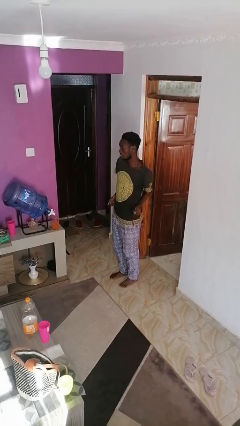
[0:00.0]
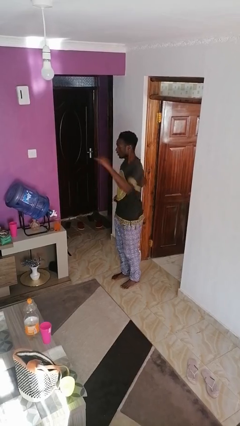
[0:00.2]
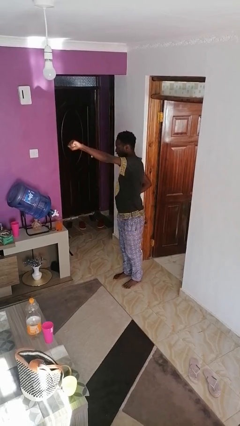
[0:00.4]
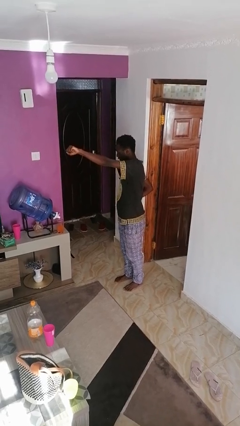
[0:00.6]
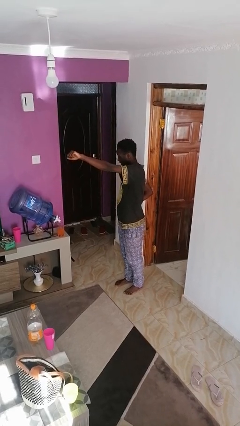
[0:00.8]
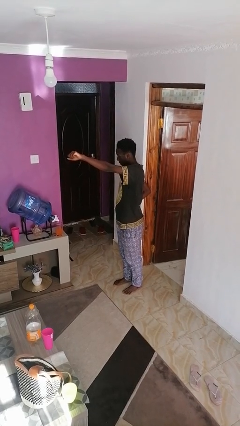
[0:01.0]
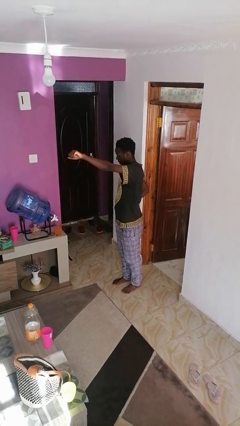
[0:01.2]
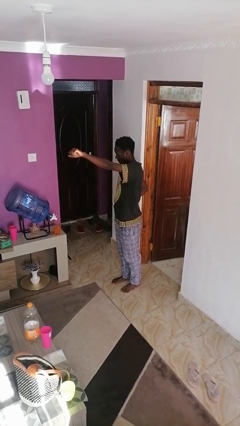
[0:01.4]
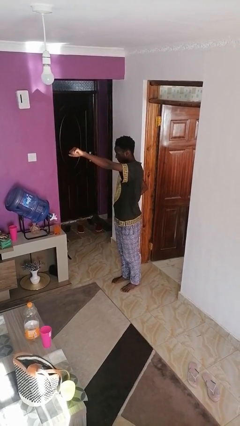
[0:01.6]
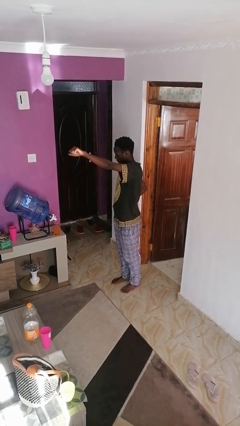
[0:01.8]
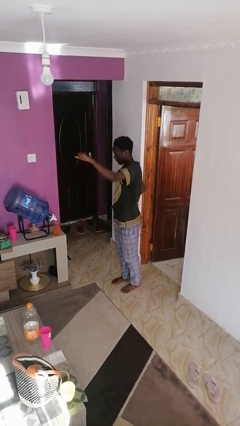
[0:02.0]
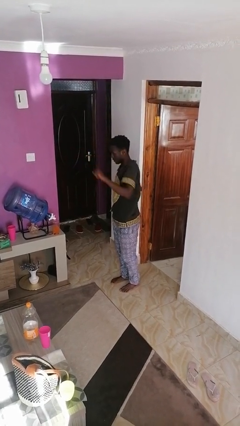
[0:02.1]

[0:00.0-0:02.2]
person punches

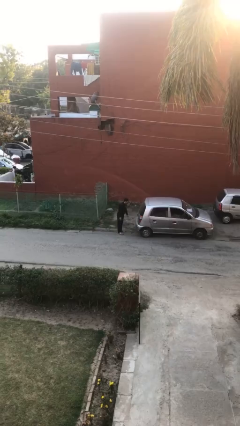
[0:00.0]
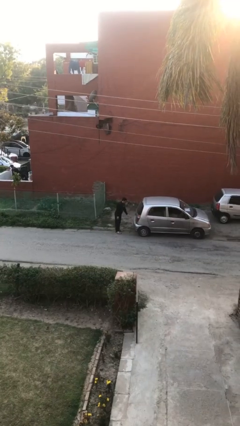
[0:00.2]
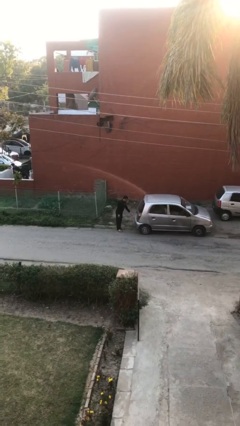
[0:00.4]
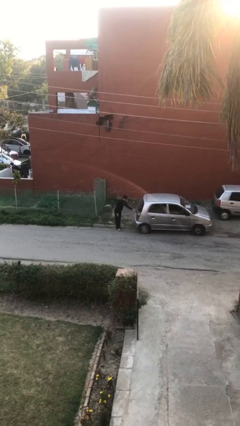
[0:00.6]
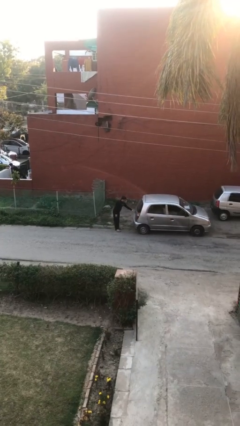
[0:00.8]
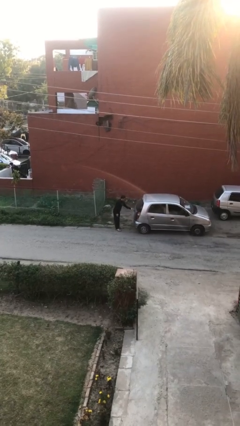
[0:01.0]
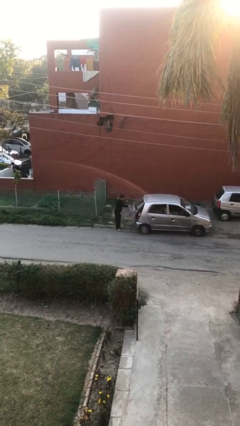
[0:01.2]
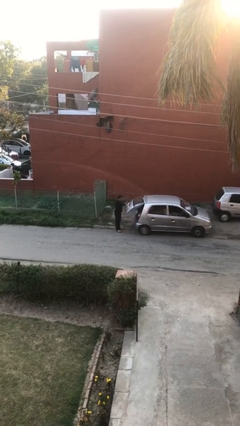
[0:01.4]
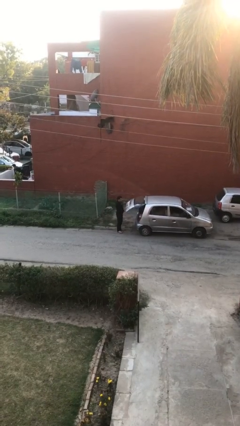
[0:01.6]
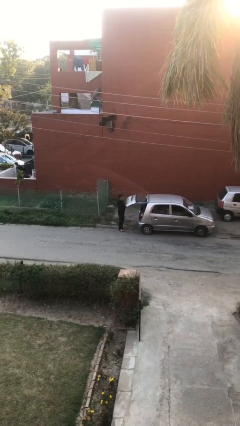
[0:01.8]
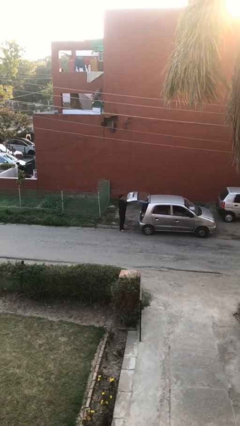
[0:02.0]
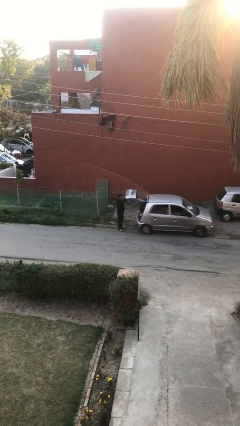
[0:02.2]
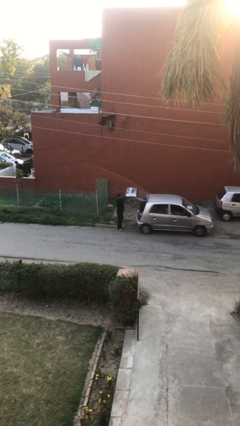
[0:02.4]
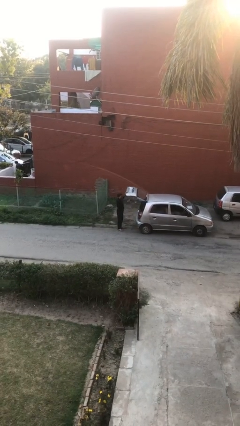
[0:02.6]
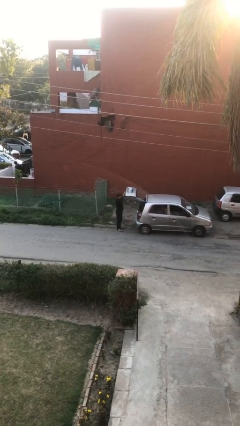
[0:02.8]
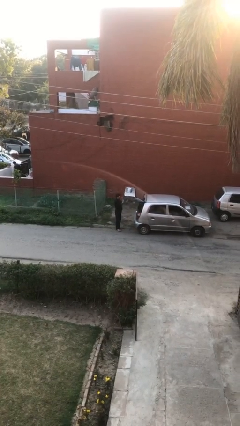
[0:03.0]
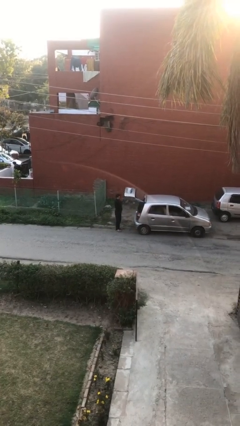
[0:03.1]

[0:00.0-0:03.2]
person opens car trunk

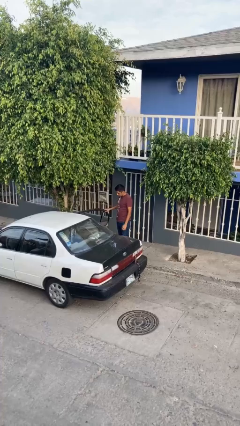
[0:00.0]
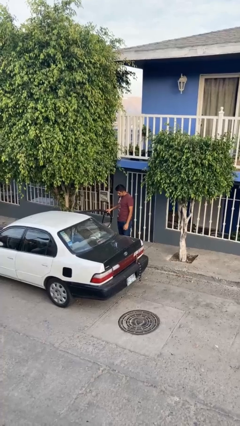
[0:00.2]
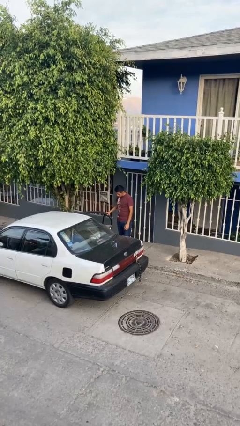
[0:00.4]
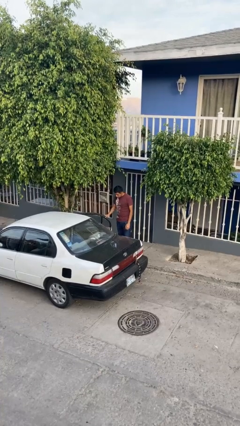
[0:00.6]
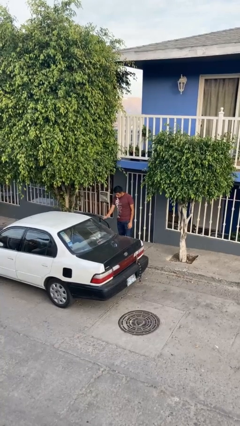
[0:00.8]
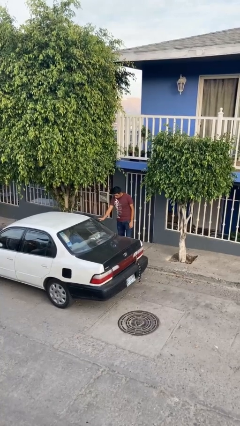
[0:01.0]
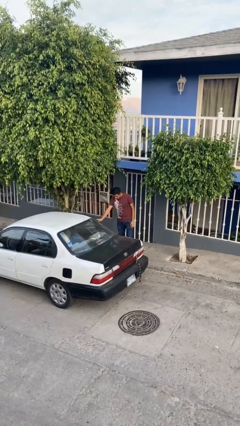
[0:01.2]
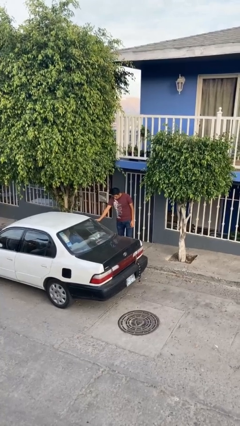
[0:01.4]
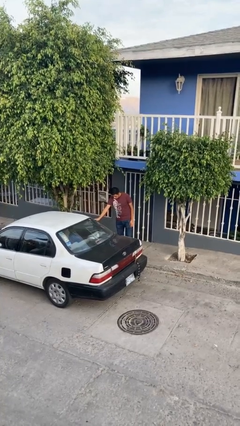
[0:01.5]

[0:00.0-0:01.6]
person closes car door

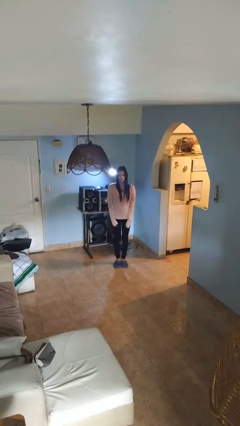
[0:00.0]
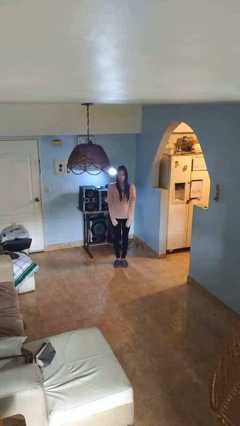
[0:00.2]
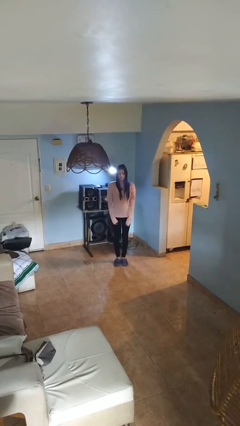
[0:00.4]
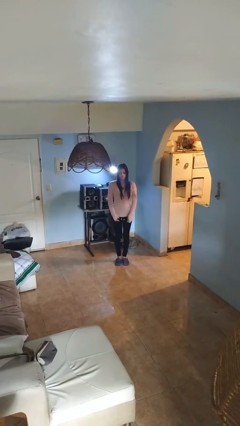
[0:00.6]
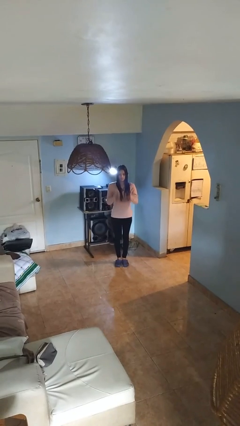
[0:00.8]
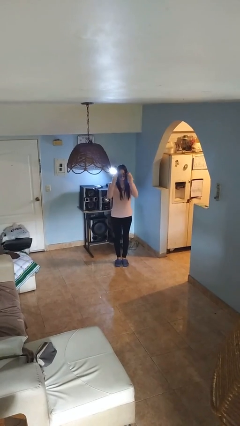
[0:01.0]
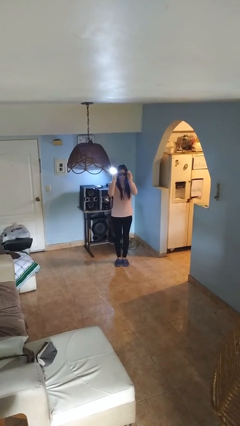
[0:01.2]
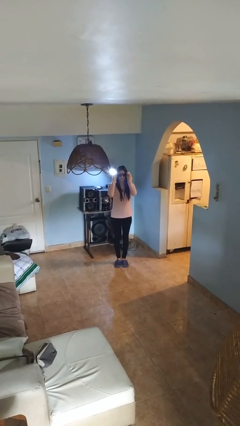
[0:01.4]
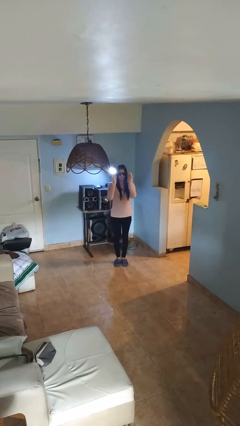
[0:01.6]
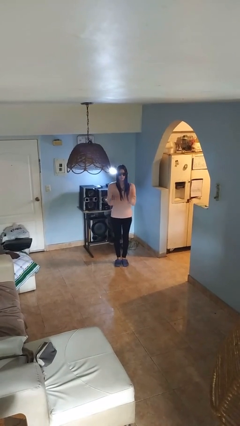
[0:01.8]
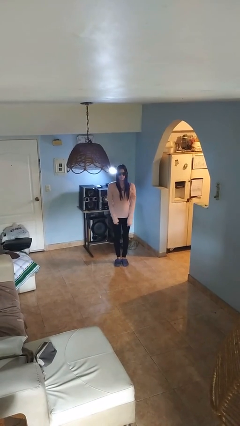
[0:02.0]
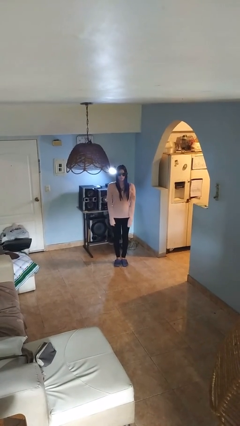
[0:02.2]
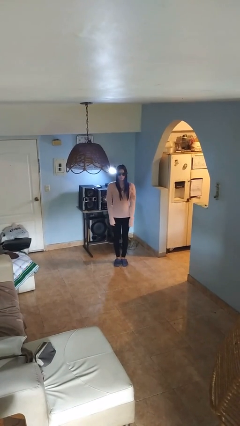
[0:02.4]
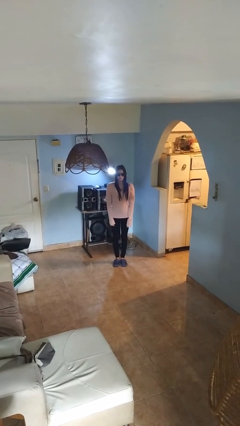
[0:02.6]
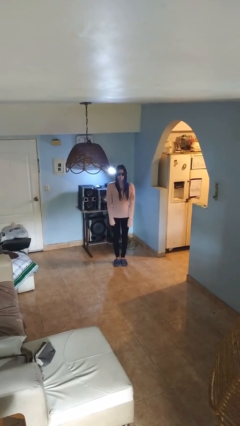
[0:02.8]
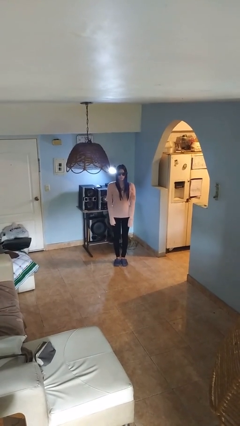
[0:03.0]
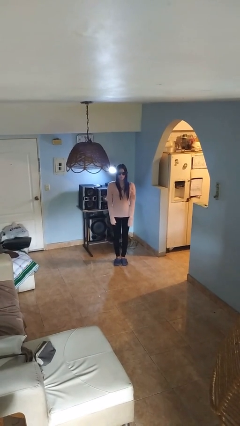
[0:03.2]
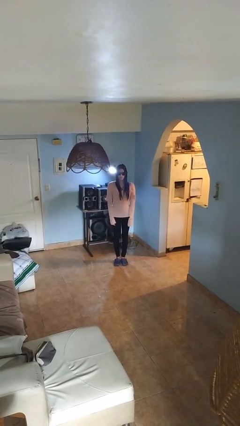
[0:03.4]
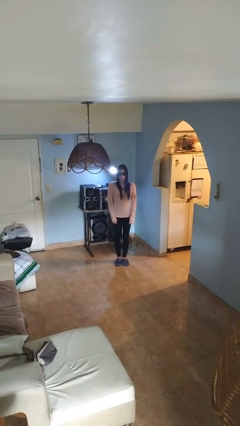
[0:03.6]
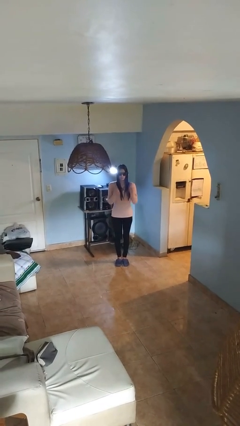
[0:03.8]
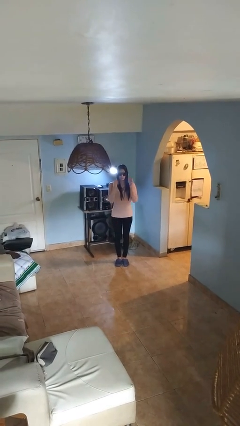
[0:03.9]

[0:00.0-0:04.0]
person puts on sunglasses

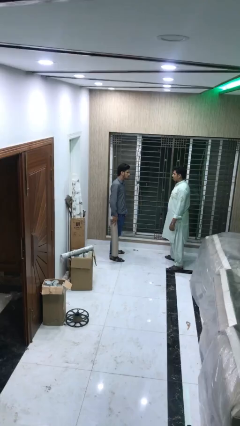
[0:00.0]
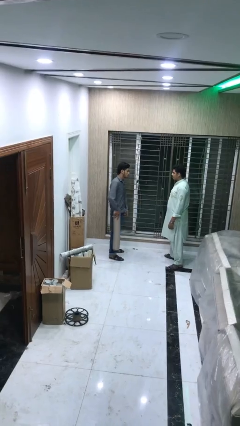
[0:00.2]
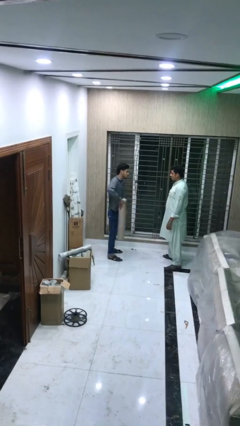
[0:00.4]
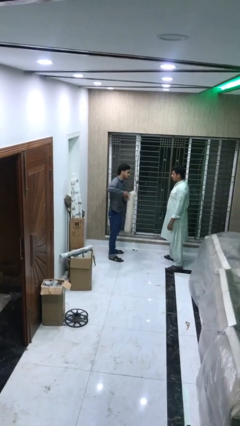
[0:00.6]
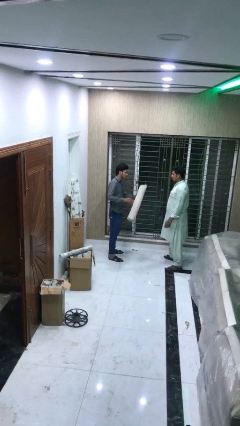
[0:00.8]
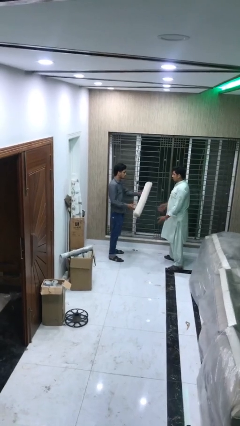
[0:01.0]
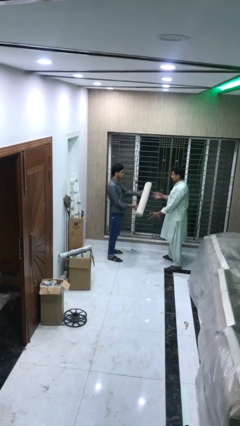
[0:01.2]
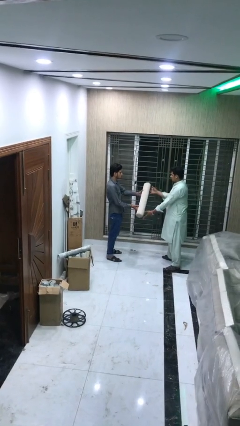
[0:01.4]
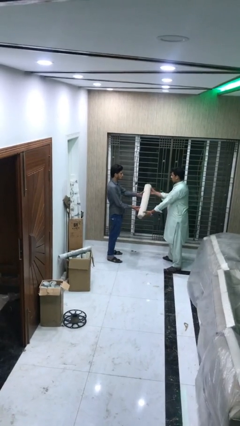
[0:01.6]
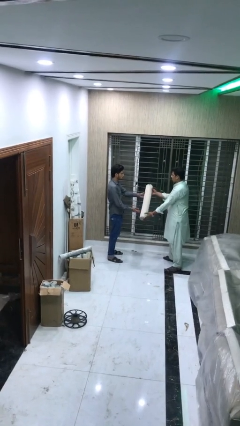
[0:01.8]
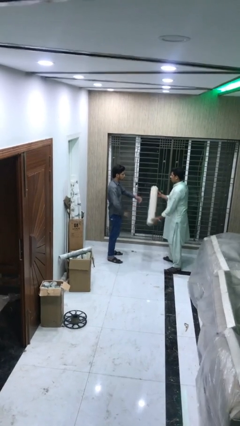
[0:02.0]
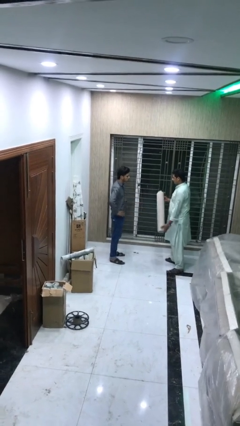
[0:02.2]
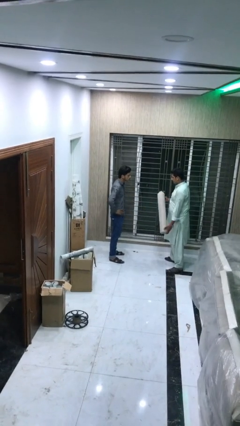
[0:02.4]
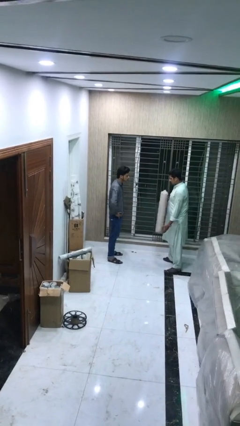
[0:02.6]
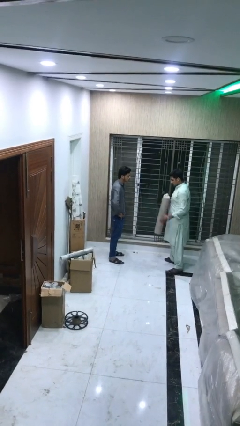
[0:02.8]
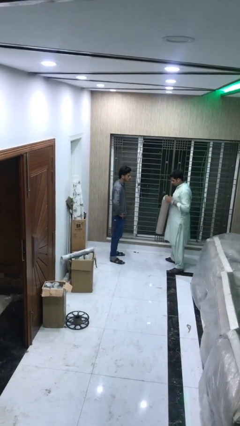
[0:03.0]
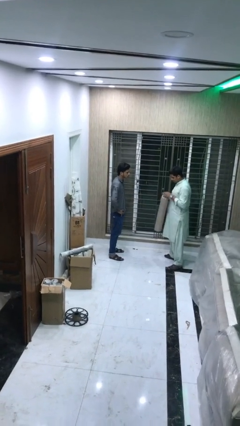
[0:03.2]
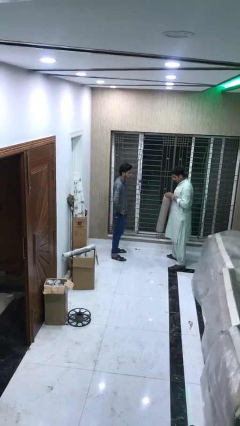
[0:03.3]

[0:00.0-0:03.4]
person transfers object to person

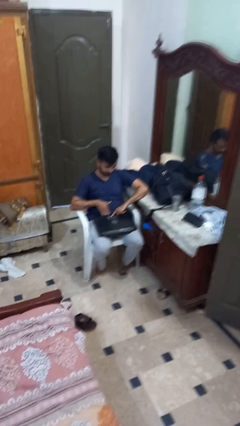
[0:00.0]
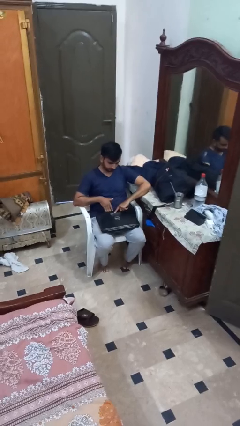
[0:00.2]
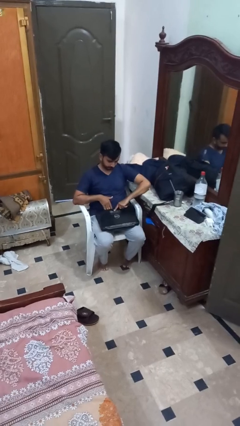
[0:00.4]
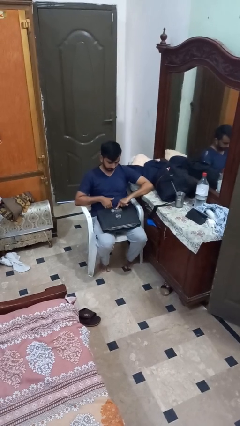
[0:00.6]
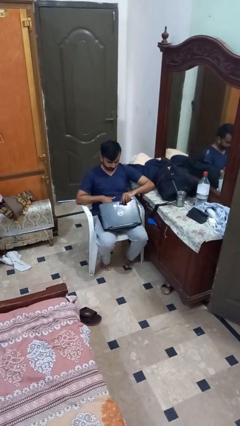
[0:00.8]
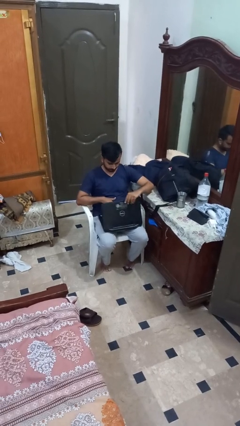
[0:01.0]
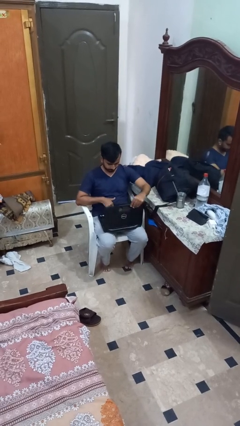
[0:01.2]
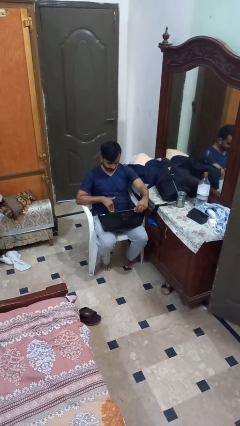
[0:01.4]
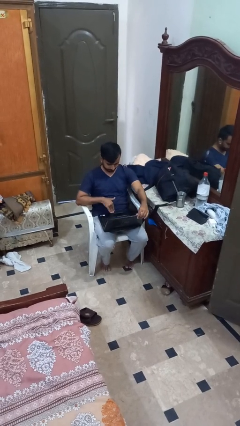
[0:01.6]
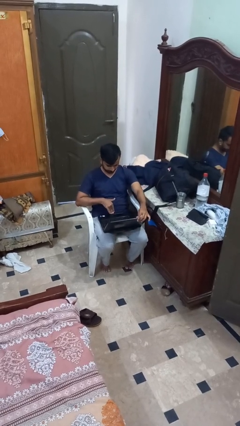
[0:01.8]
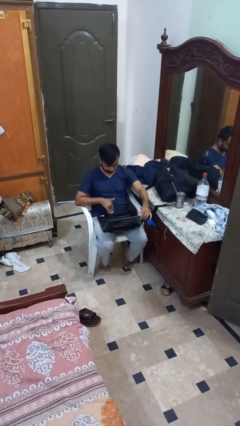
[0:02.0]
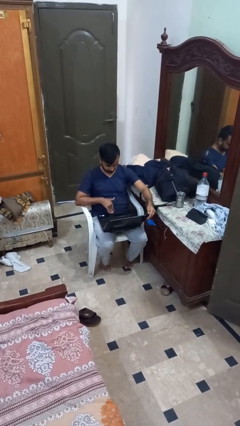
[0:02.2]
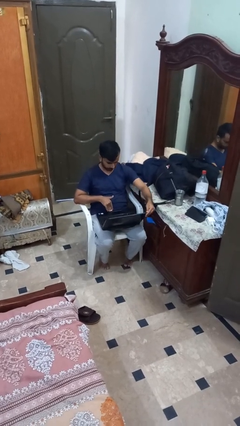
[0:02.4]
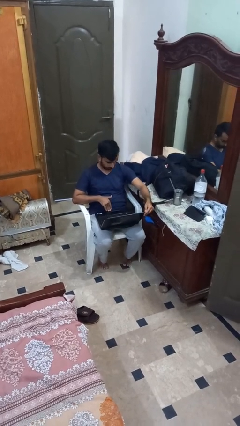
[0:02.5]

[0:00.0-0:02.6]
person opens laptop

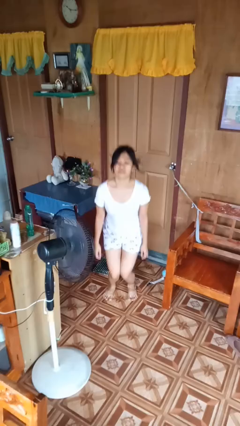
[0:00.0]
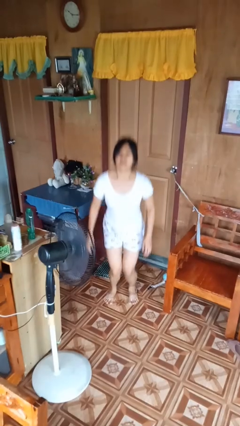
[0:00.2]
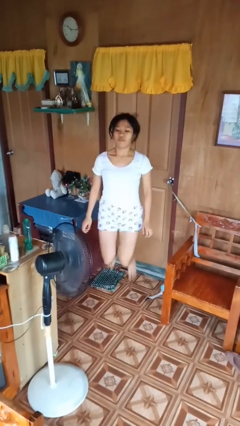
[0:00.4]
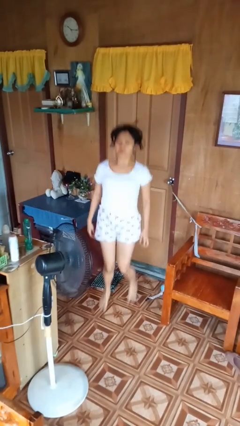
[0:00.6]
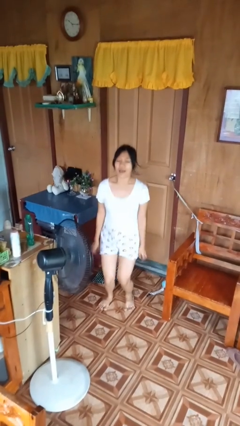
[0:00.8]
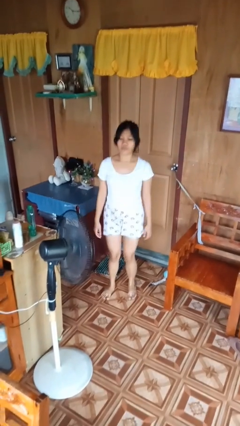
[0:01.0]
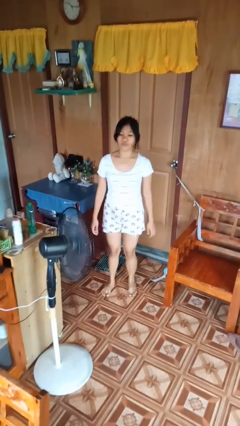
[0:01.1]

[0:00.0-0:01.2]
person jumps
